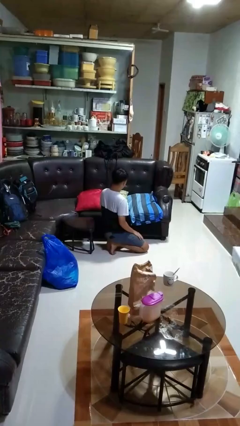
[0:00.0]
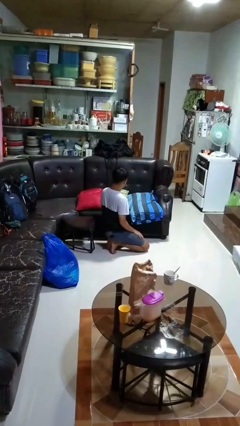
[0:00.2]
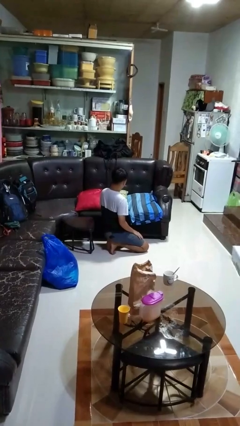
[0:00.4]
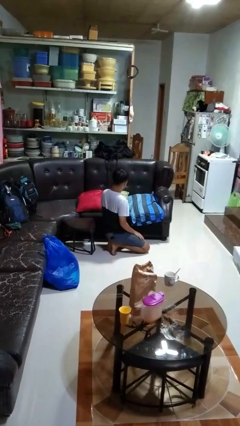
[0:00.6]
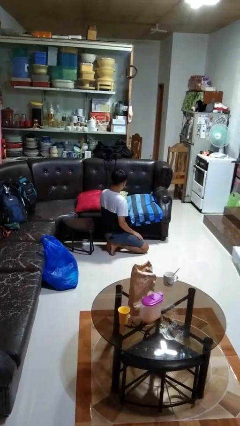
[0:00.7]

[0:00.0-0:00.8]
person searches in couch

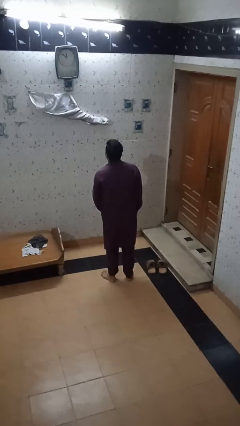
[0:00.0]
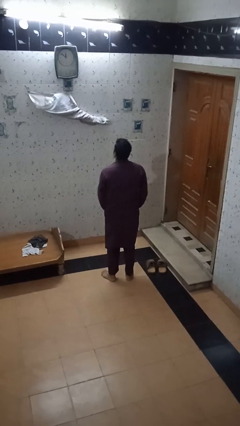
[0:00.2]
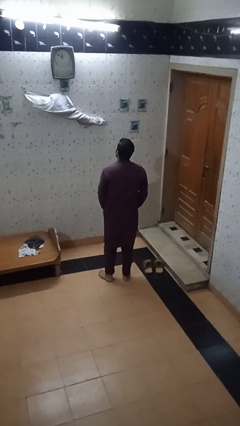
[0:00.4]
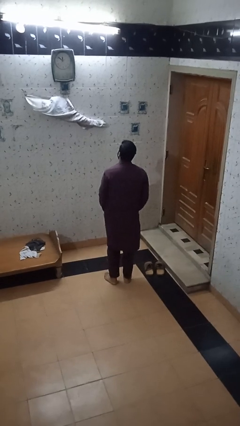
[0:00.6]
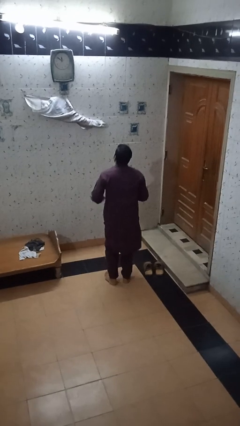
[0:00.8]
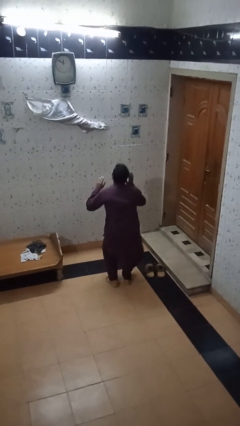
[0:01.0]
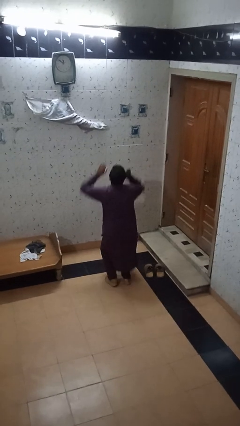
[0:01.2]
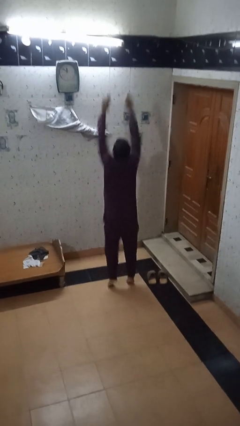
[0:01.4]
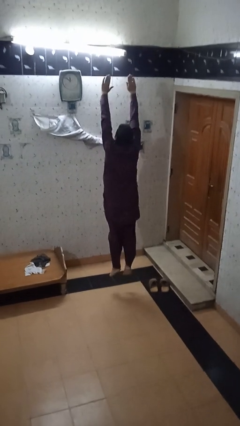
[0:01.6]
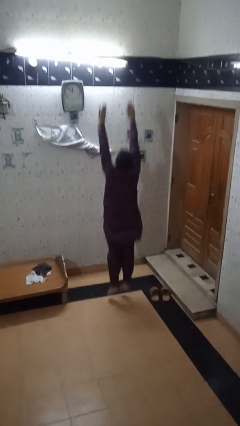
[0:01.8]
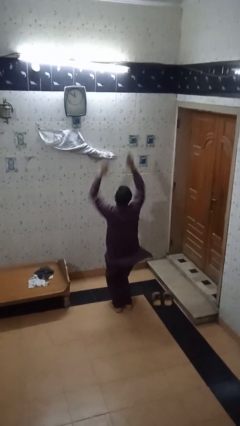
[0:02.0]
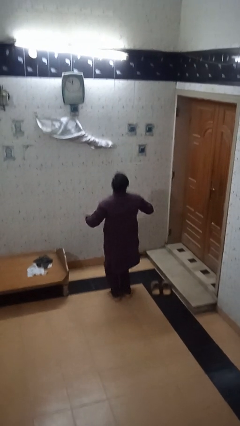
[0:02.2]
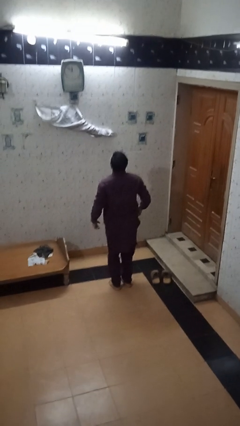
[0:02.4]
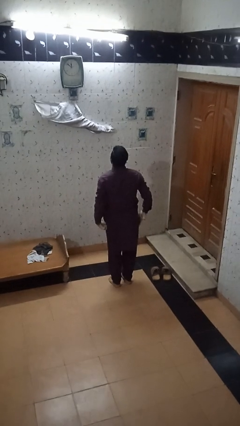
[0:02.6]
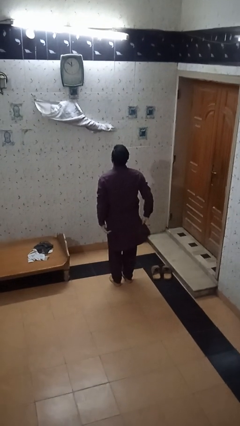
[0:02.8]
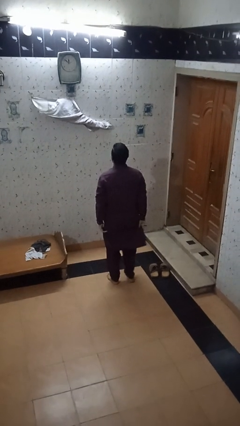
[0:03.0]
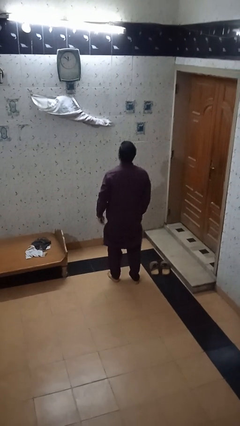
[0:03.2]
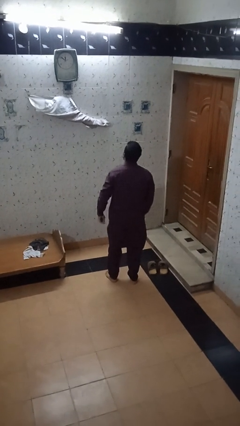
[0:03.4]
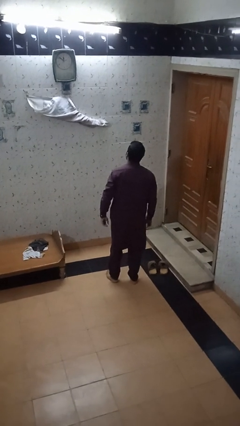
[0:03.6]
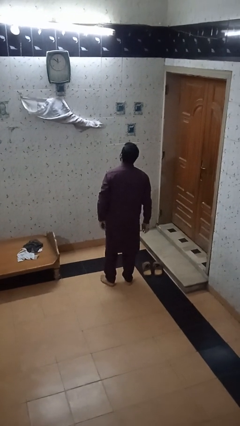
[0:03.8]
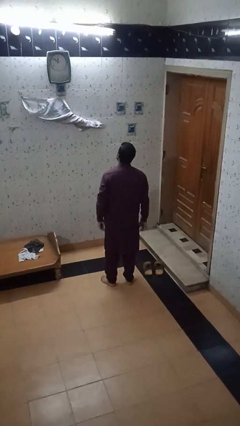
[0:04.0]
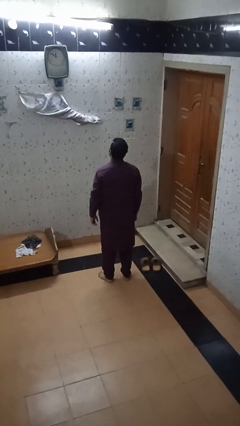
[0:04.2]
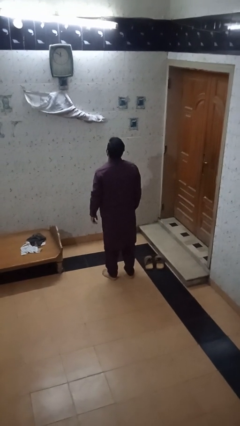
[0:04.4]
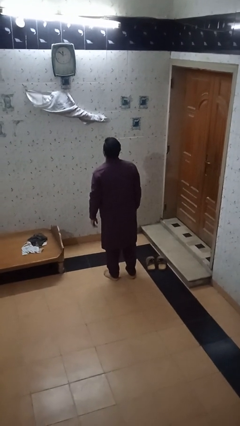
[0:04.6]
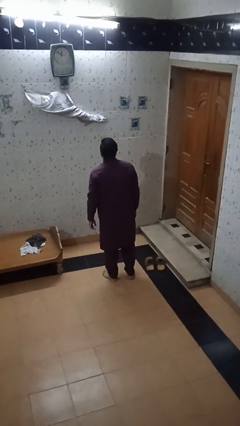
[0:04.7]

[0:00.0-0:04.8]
person jumps

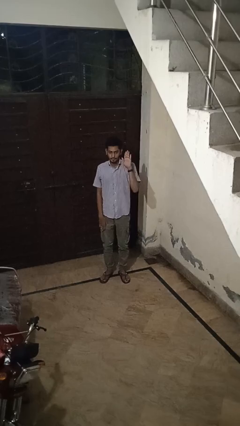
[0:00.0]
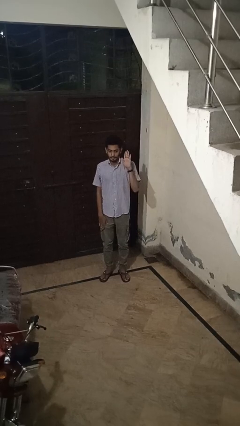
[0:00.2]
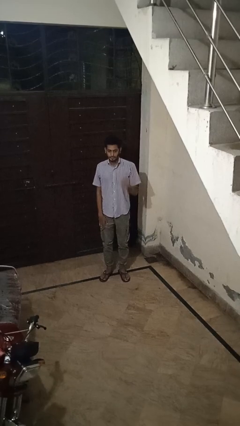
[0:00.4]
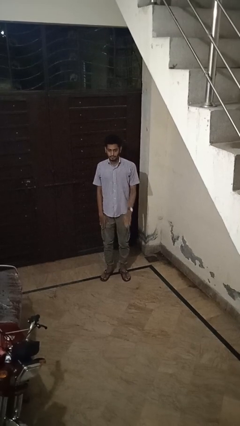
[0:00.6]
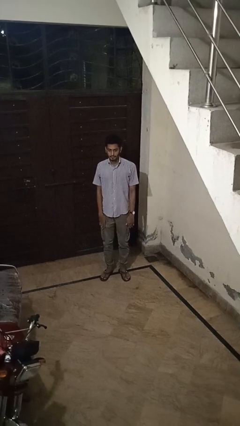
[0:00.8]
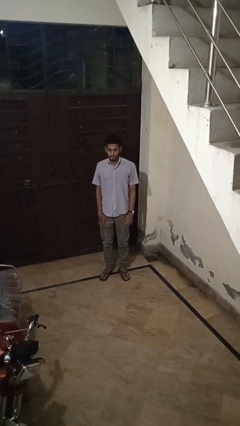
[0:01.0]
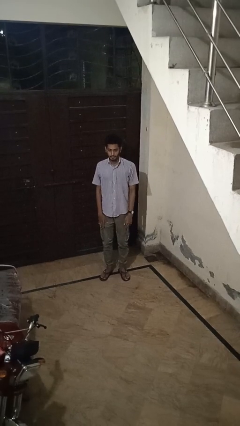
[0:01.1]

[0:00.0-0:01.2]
person gestures lower hand

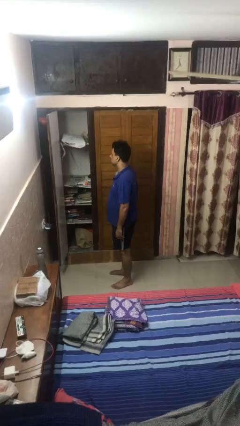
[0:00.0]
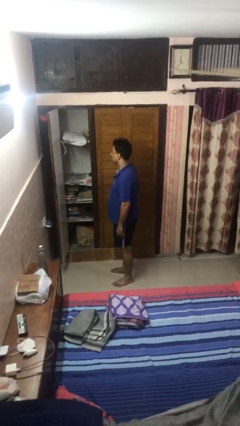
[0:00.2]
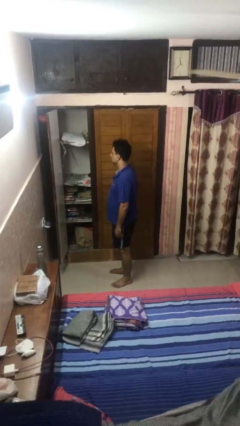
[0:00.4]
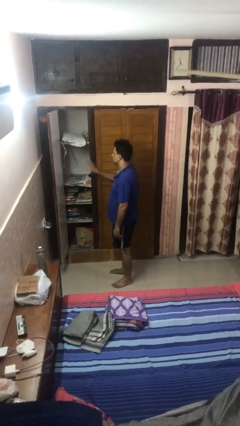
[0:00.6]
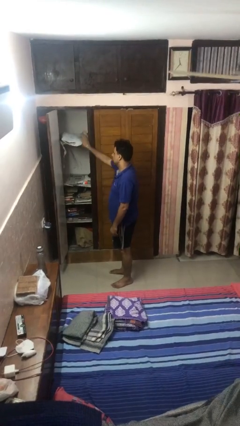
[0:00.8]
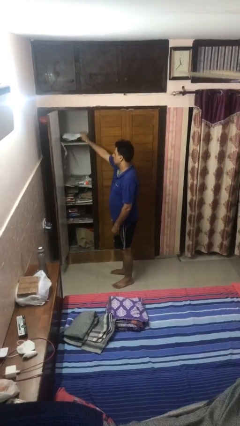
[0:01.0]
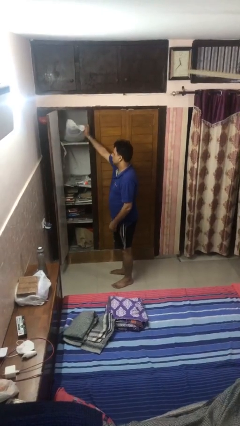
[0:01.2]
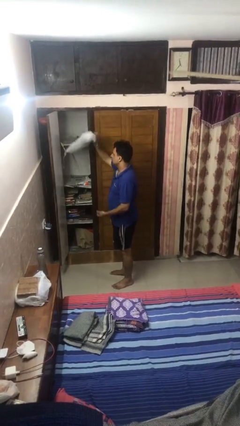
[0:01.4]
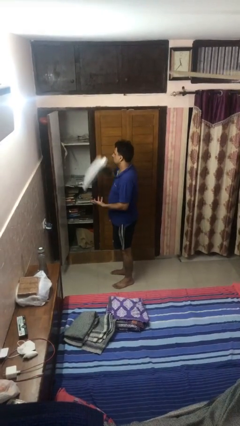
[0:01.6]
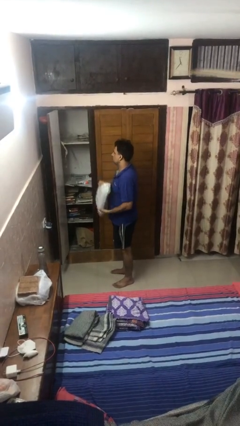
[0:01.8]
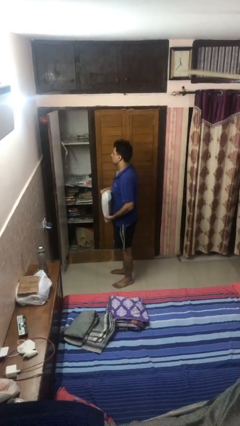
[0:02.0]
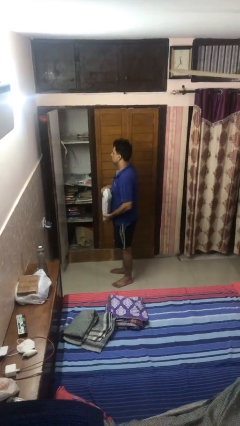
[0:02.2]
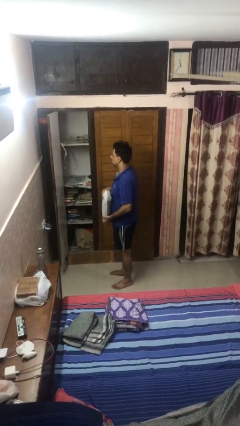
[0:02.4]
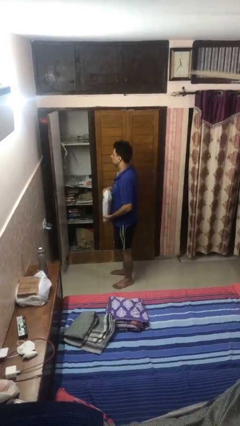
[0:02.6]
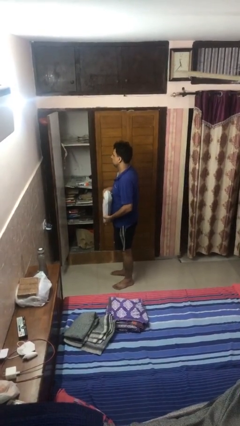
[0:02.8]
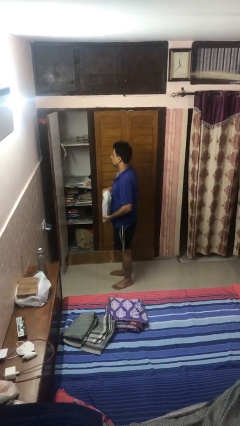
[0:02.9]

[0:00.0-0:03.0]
person picks up object from shelf

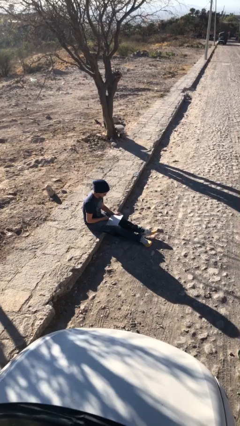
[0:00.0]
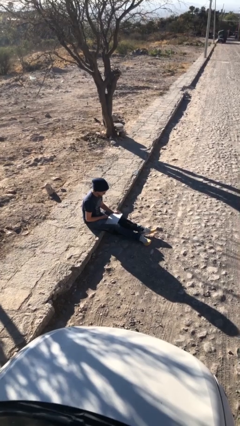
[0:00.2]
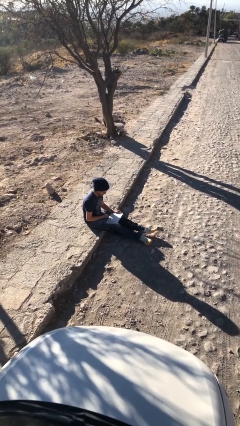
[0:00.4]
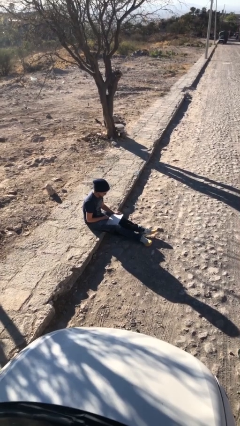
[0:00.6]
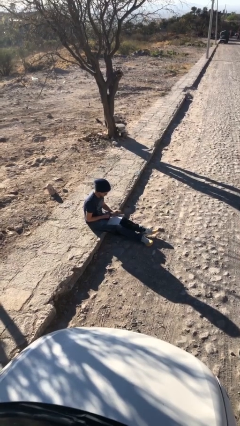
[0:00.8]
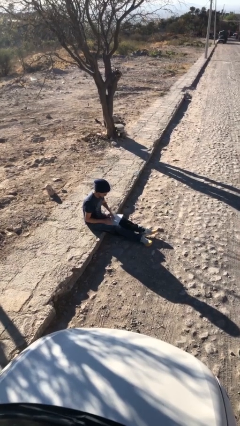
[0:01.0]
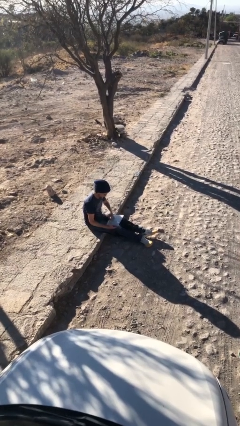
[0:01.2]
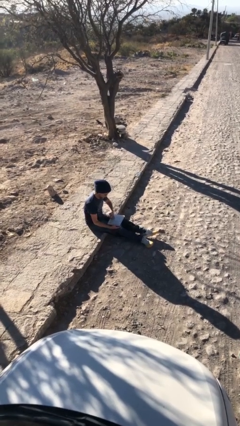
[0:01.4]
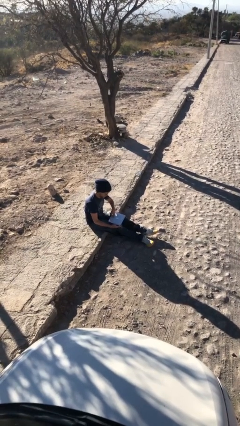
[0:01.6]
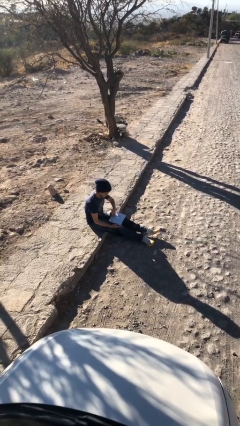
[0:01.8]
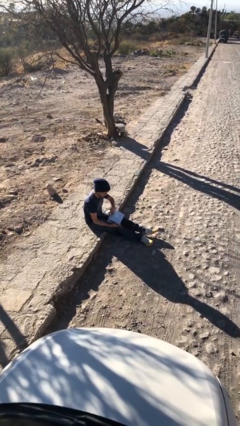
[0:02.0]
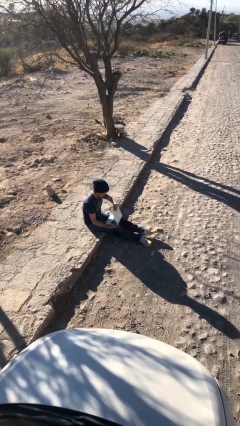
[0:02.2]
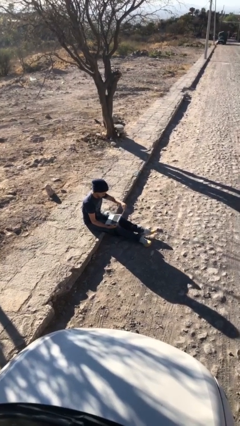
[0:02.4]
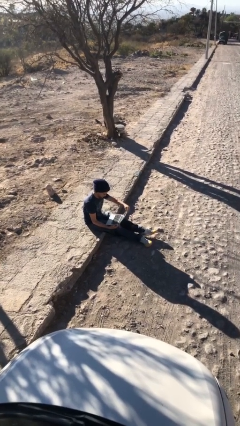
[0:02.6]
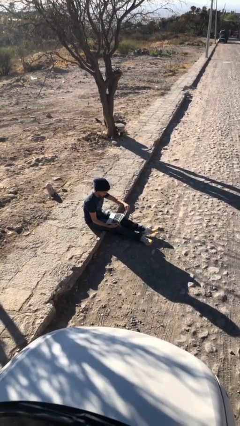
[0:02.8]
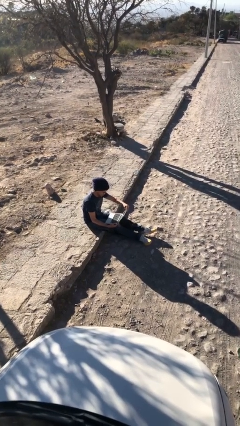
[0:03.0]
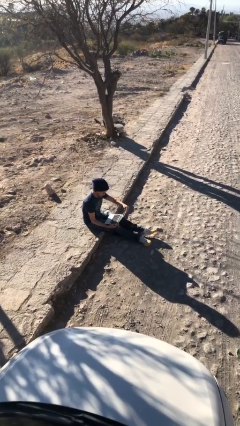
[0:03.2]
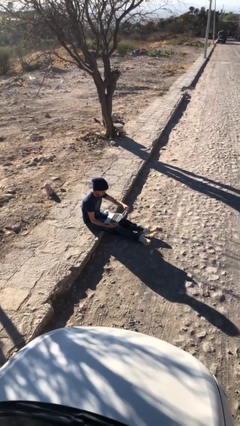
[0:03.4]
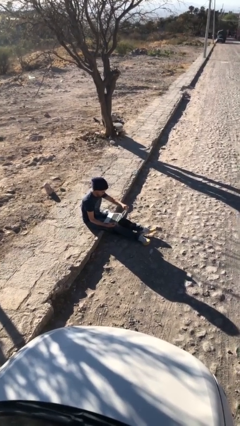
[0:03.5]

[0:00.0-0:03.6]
person interacts with laptop

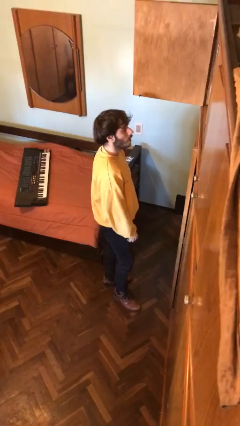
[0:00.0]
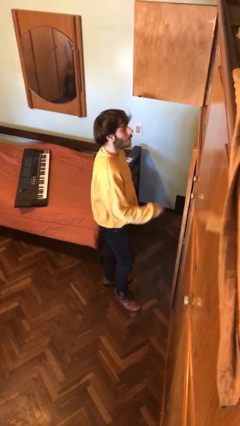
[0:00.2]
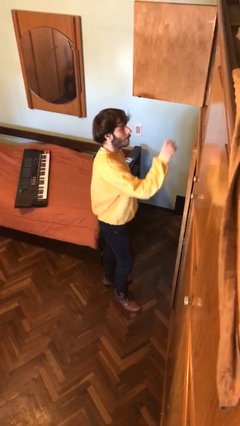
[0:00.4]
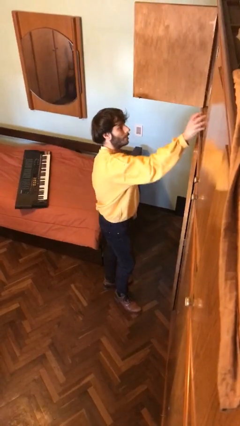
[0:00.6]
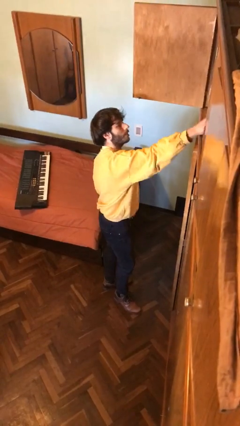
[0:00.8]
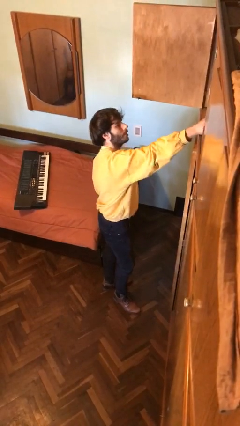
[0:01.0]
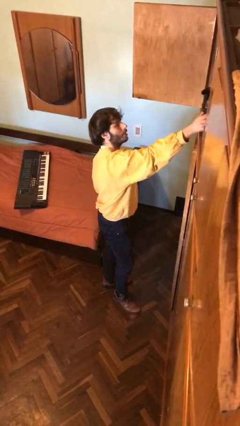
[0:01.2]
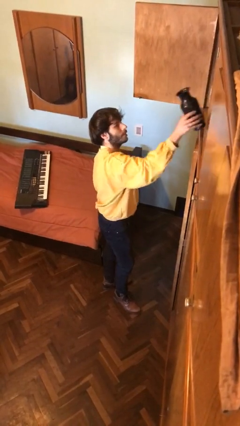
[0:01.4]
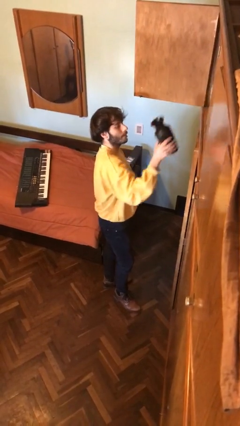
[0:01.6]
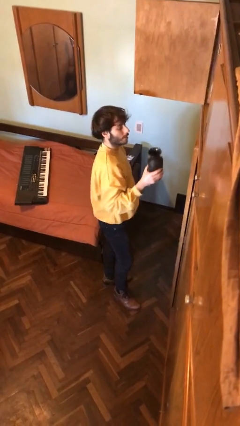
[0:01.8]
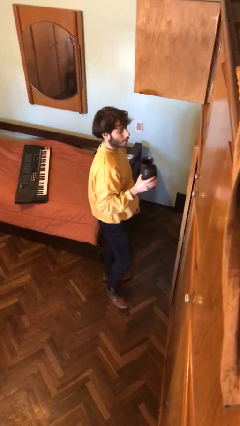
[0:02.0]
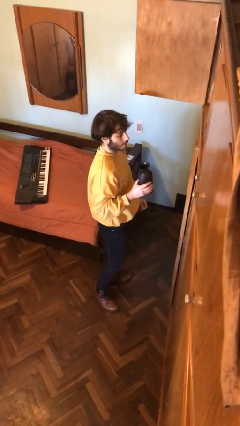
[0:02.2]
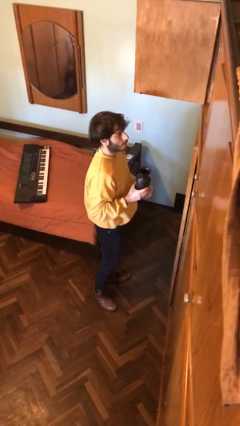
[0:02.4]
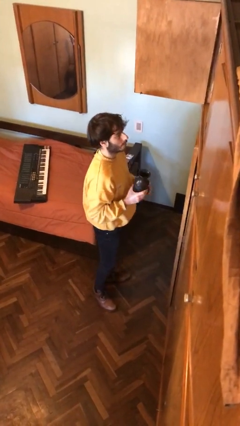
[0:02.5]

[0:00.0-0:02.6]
person picks up object from cabinet

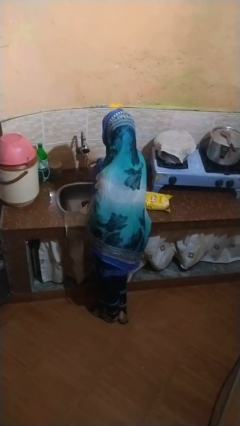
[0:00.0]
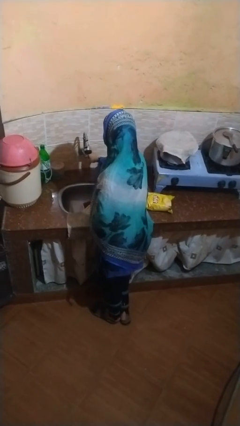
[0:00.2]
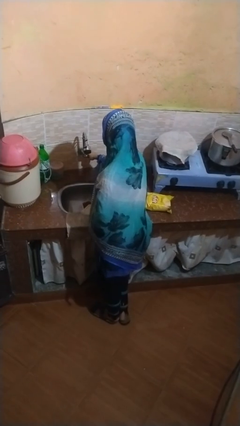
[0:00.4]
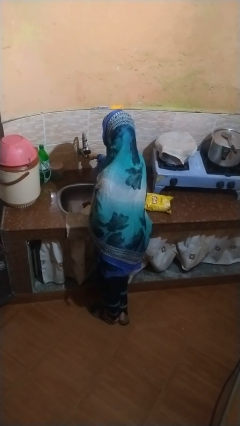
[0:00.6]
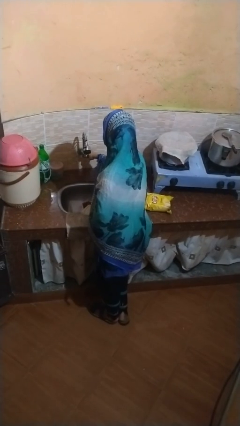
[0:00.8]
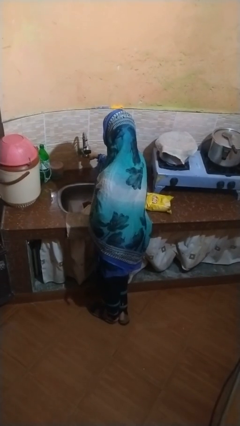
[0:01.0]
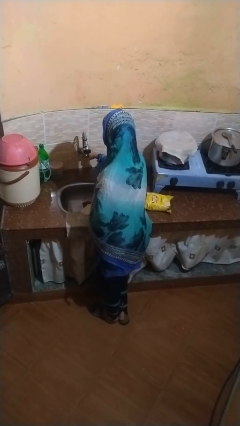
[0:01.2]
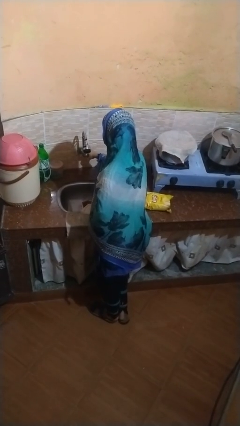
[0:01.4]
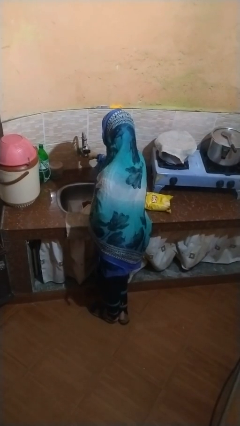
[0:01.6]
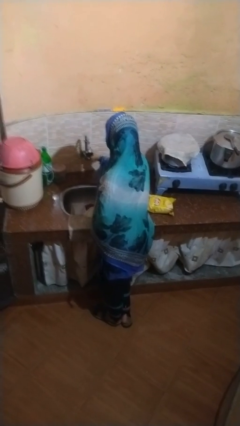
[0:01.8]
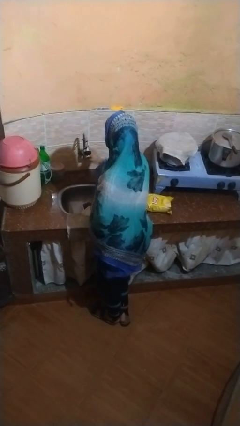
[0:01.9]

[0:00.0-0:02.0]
person turns off faucet
